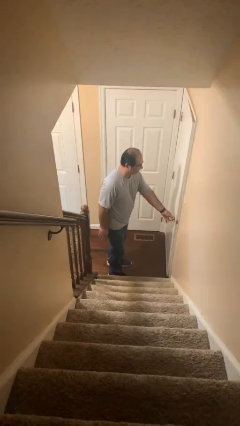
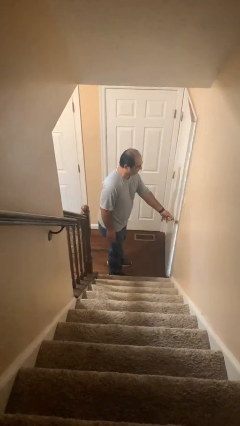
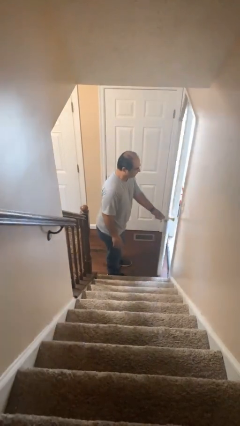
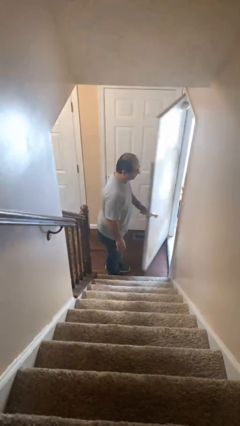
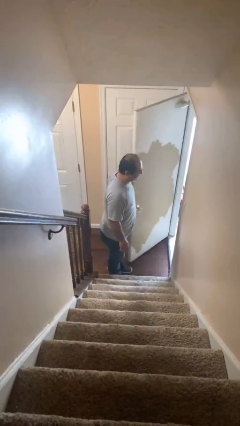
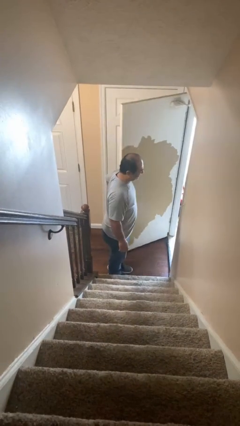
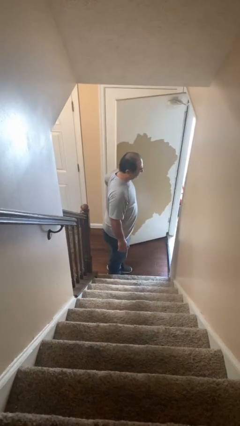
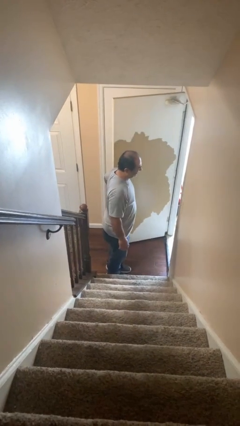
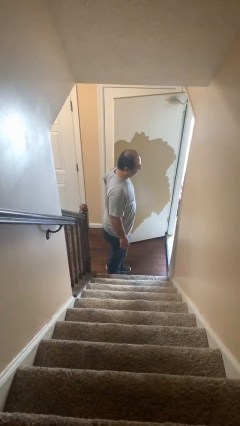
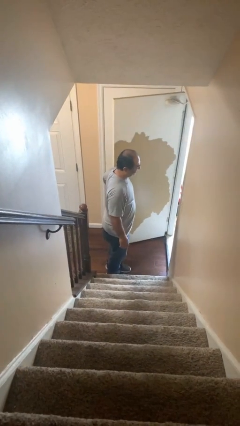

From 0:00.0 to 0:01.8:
person opens facility door

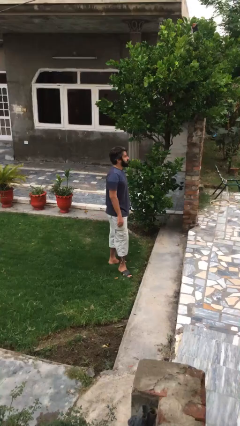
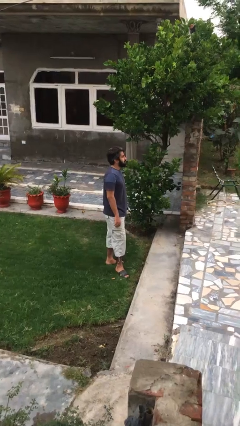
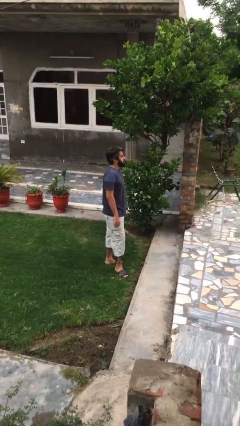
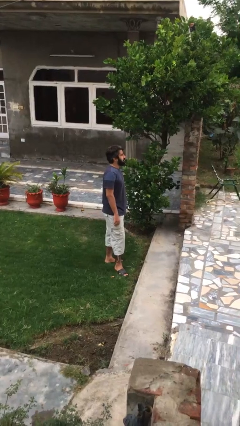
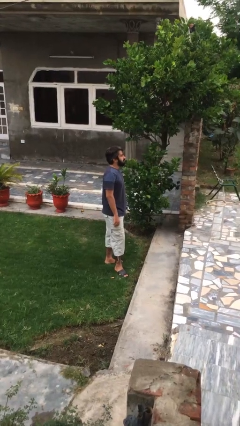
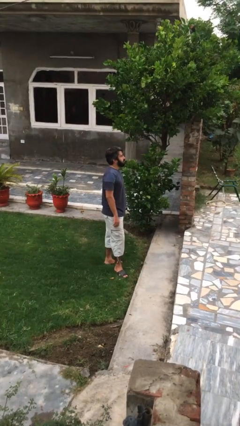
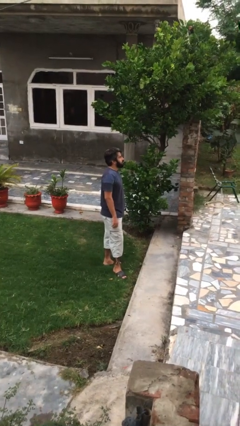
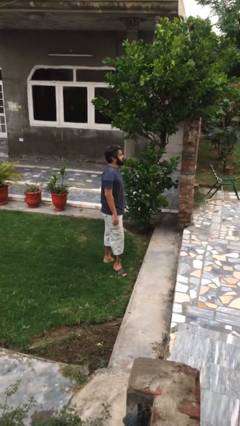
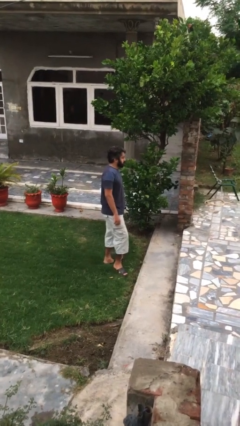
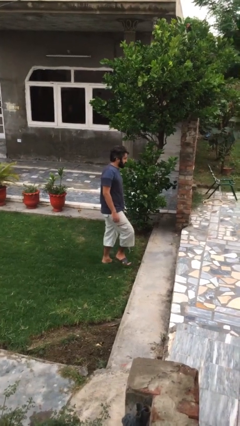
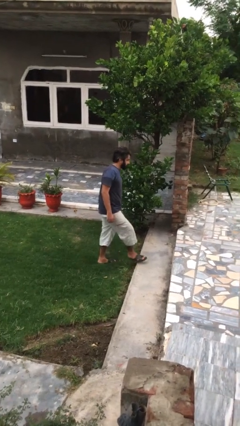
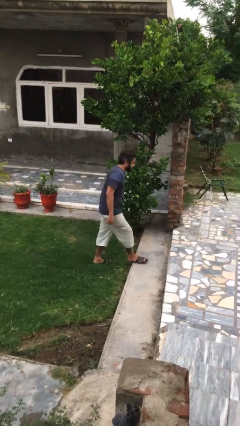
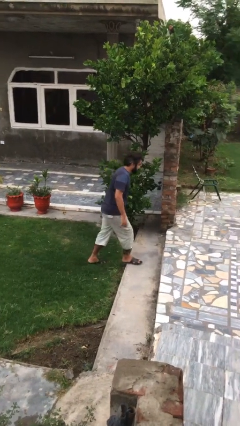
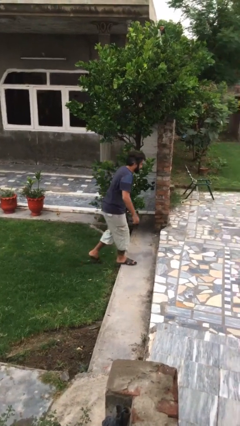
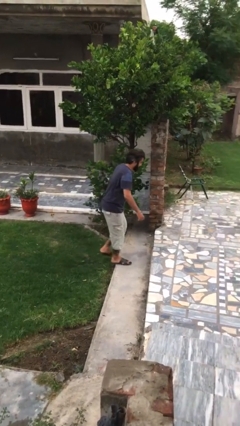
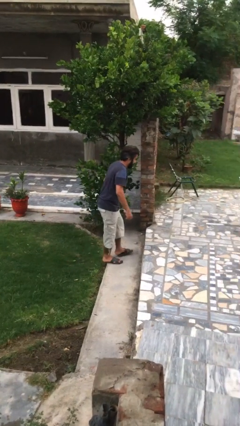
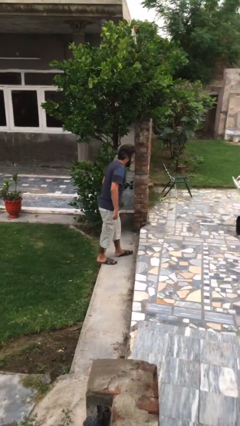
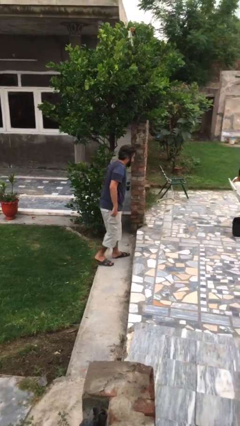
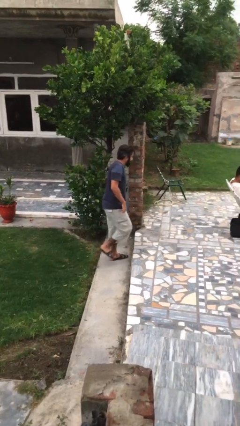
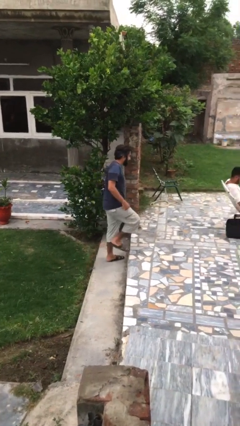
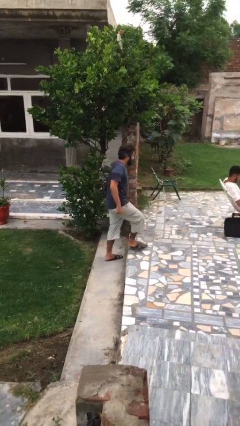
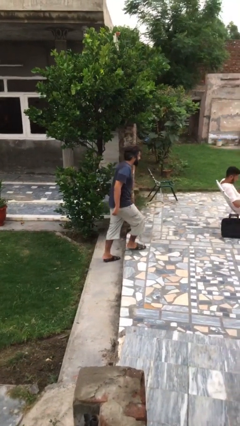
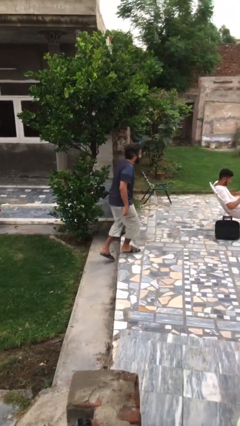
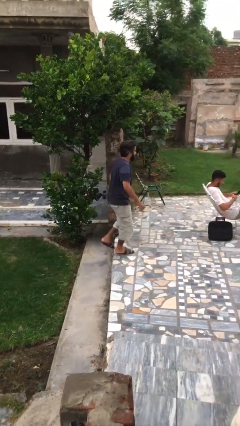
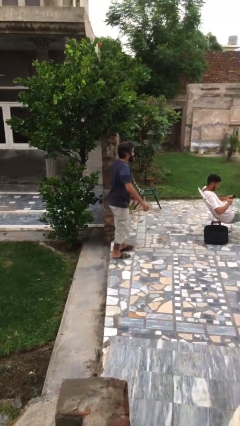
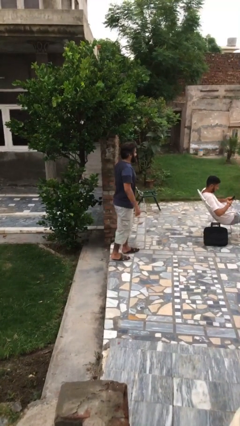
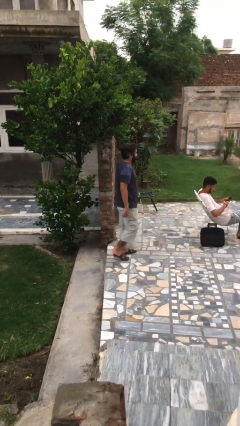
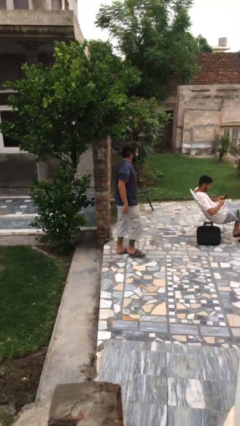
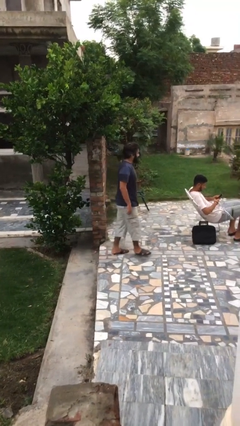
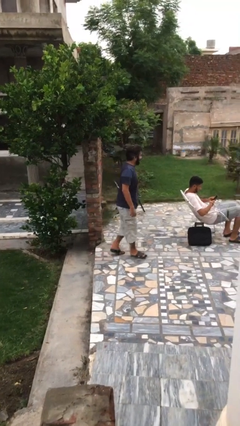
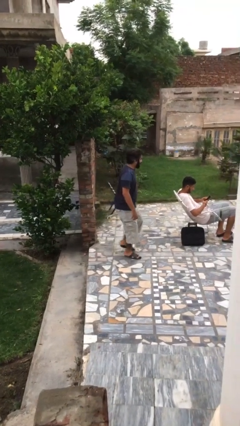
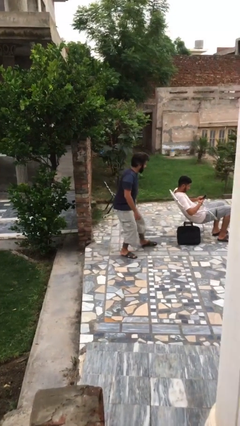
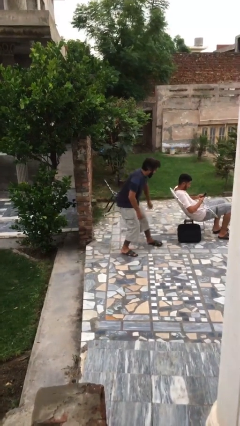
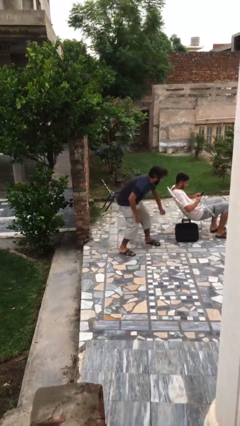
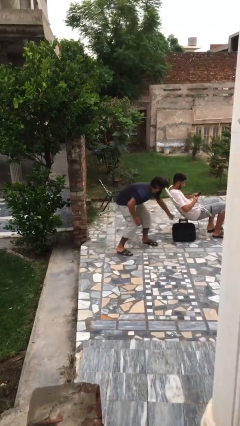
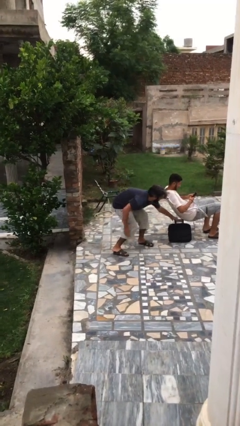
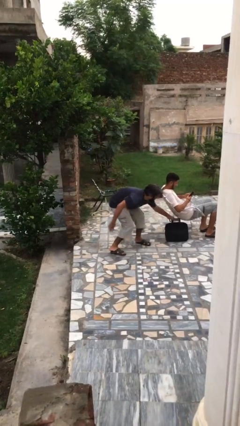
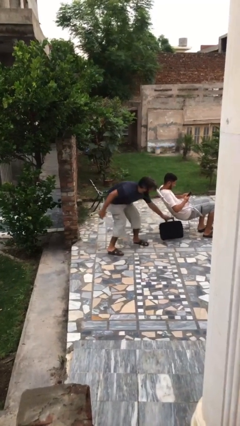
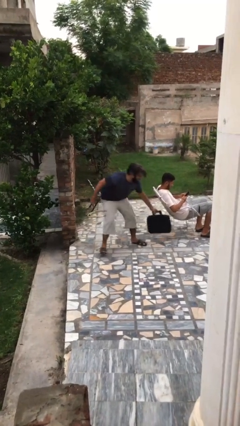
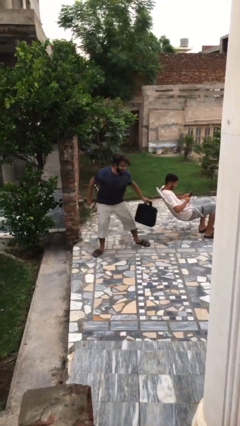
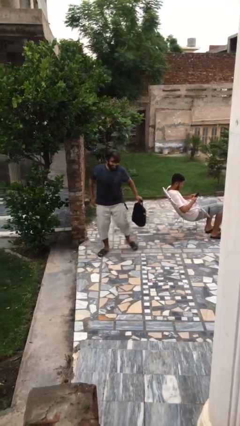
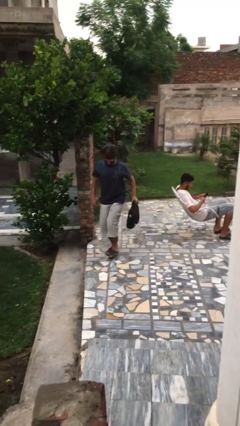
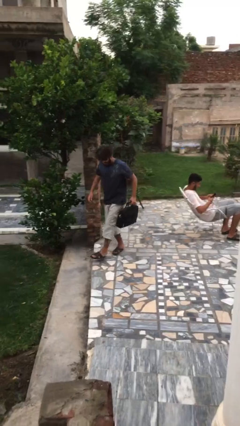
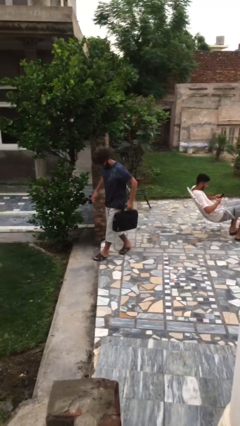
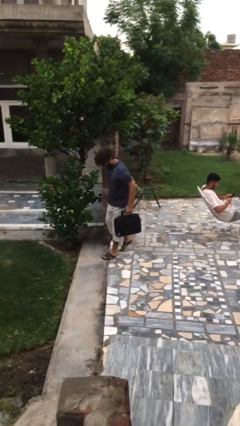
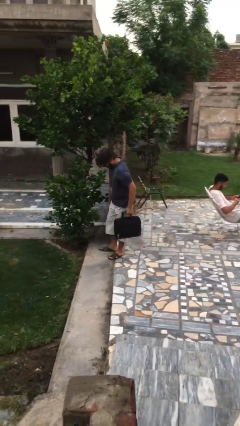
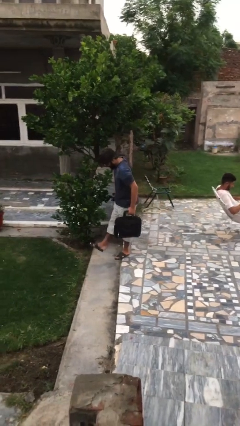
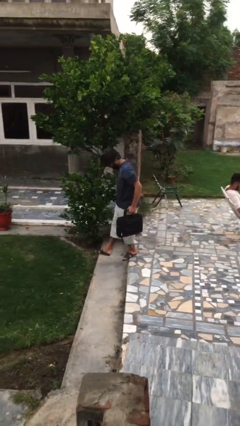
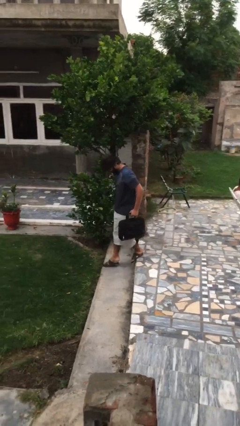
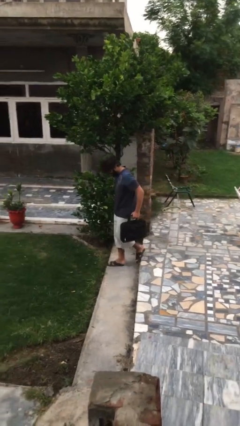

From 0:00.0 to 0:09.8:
person steals object from person

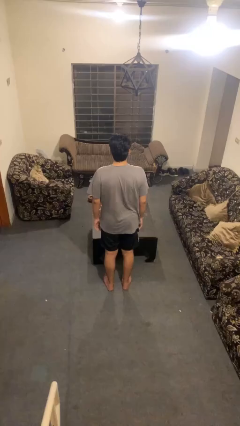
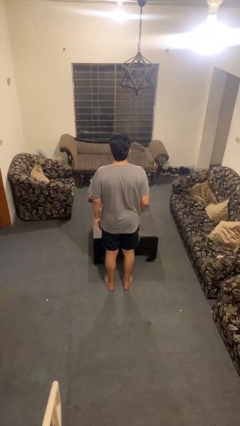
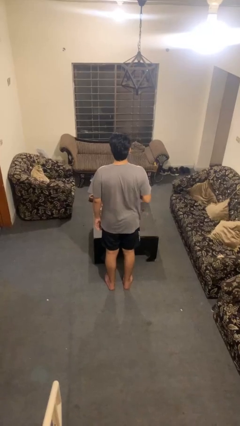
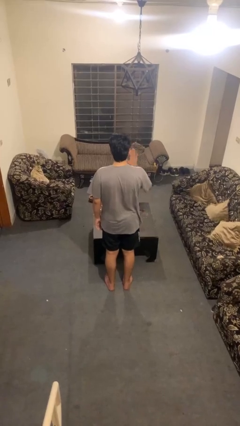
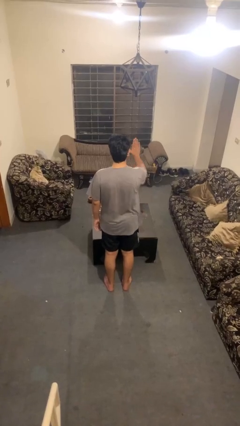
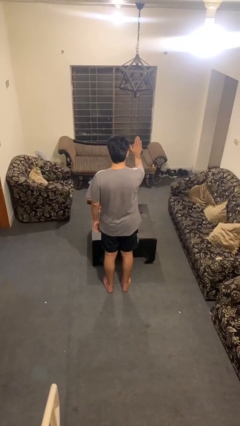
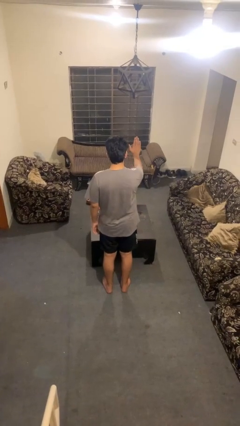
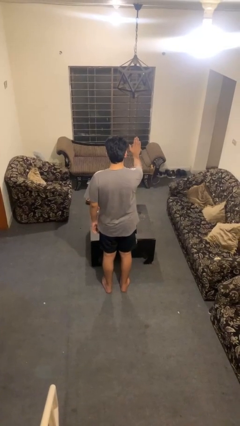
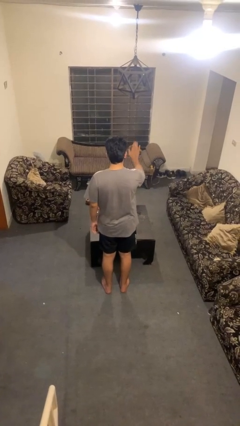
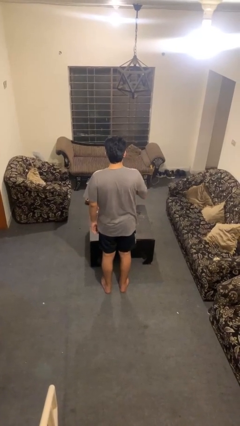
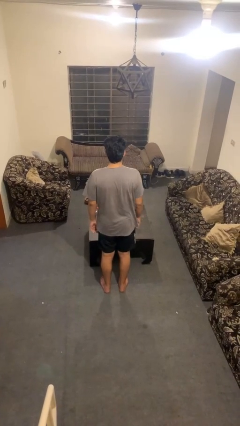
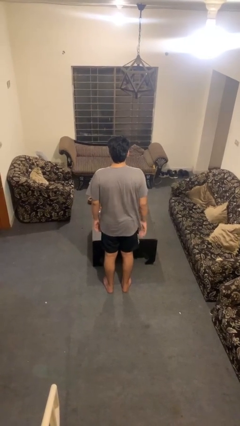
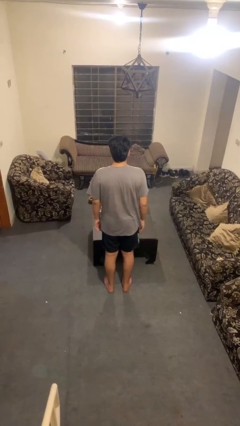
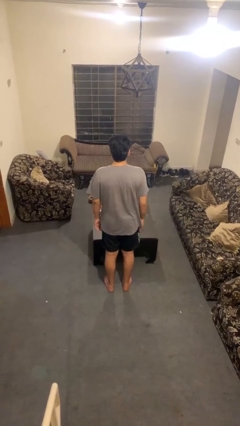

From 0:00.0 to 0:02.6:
person gestures stop

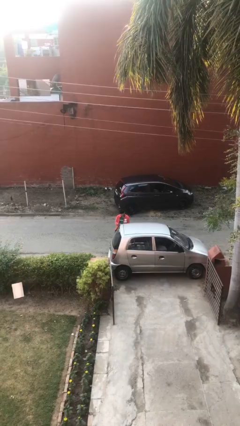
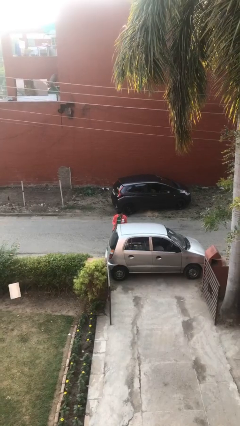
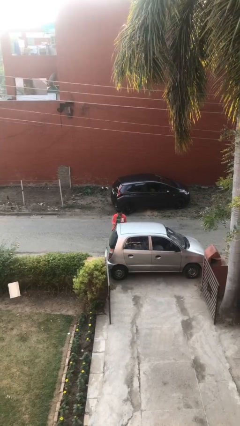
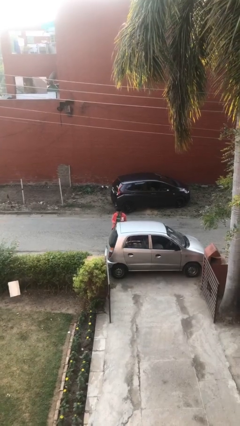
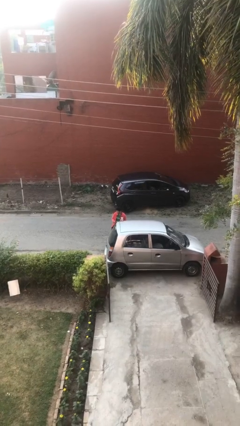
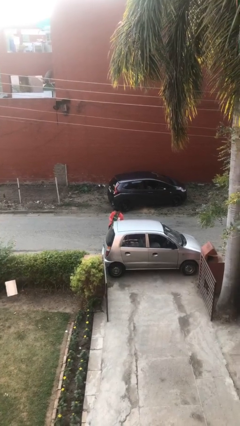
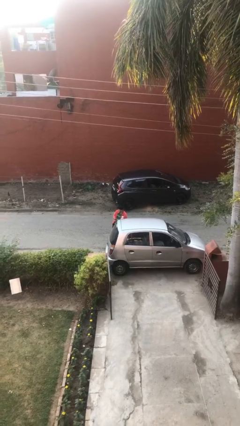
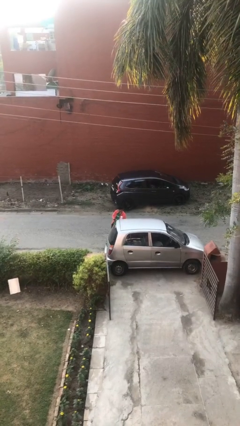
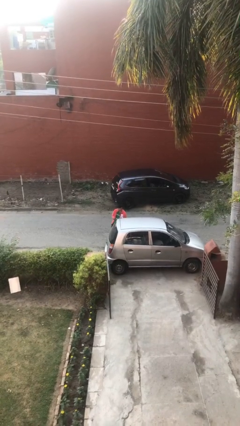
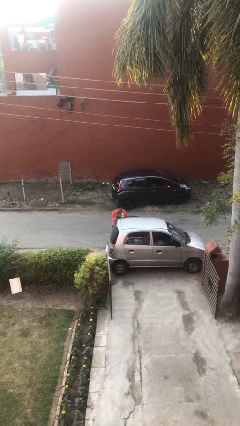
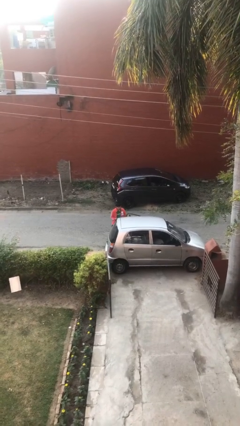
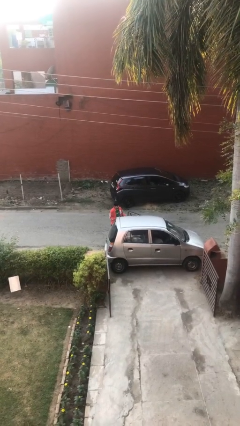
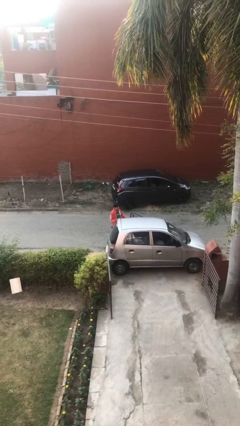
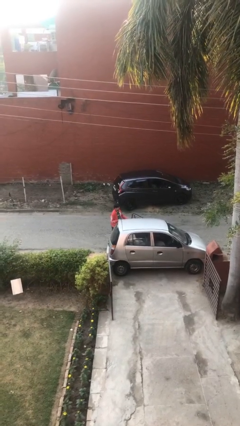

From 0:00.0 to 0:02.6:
person opens car door

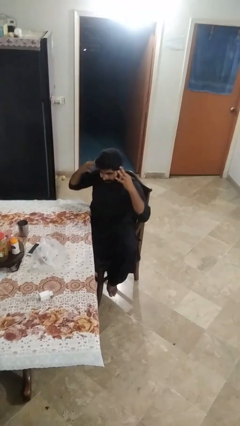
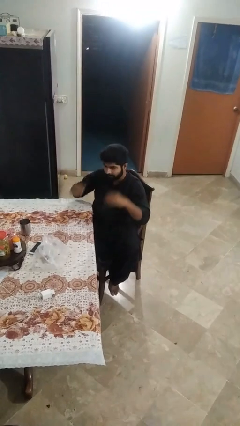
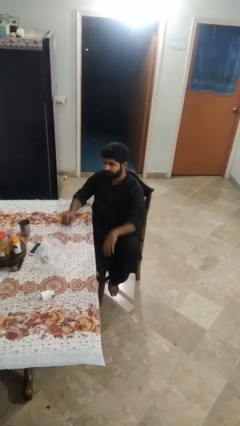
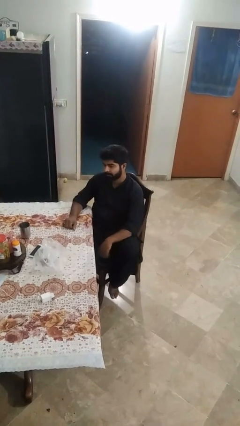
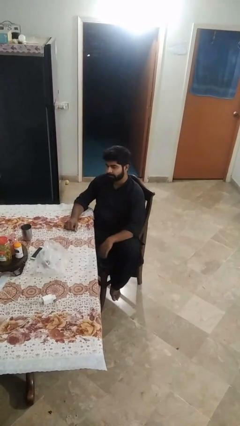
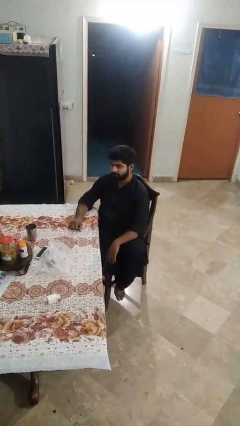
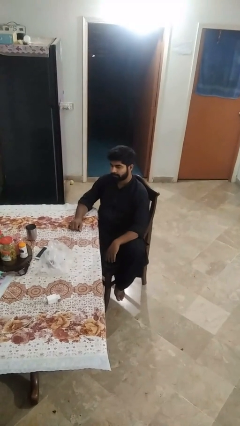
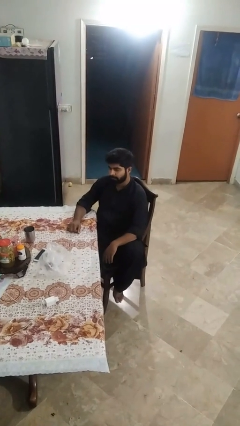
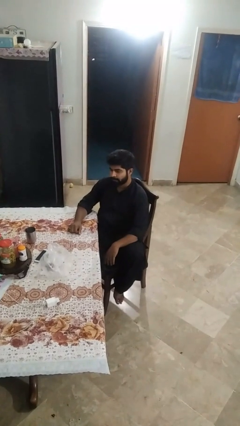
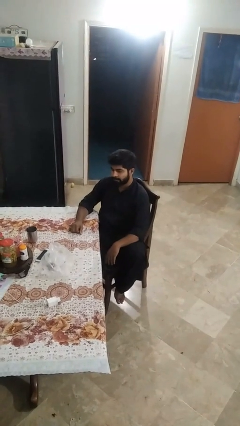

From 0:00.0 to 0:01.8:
person puts fingers in ear
